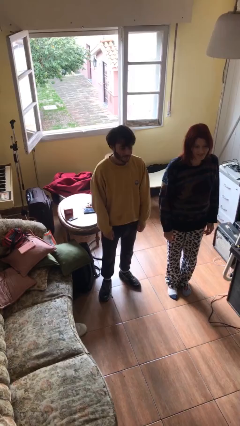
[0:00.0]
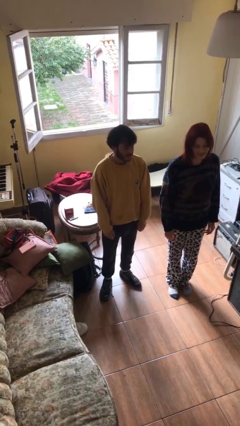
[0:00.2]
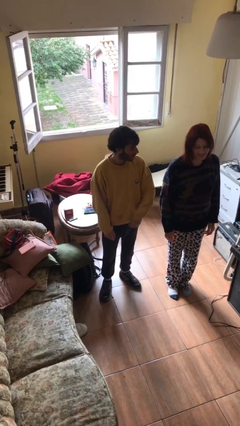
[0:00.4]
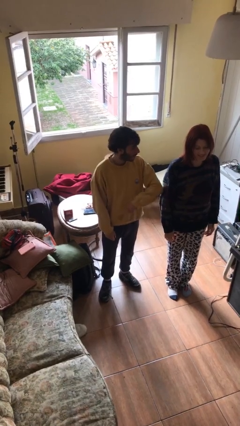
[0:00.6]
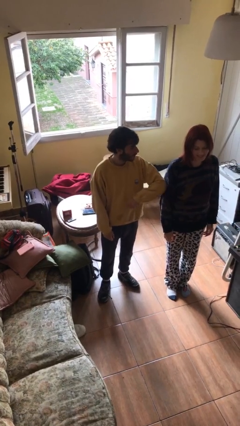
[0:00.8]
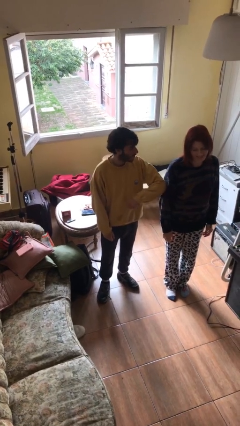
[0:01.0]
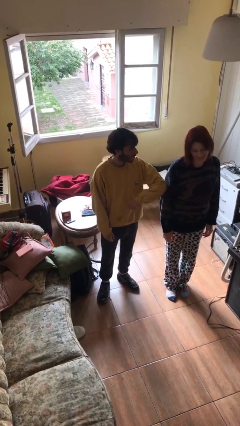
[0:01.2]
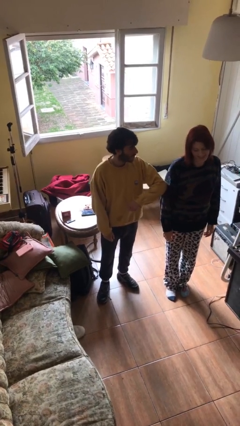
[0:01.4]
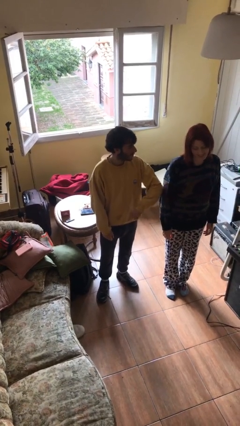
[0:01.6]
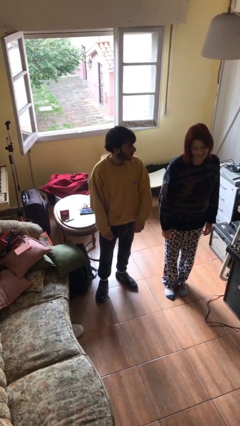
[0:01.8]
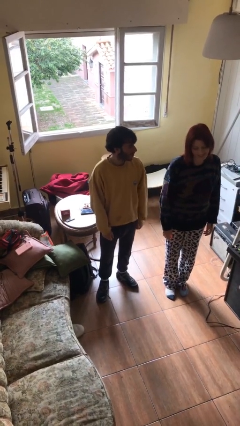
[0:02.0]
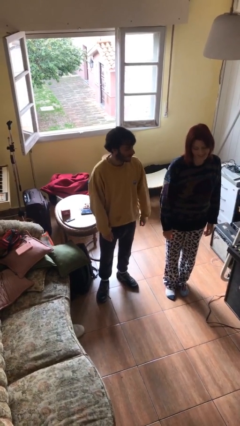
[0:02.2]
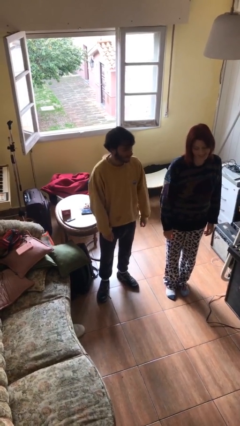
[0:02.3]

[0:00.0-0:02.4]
person nudges person with elbow

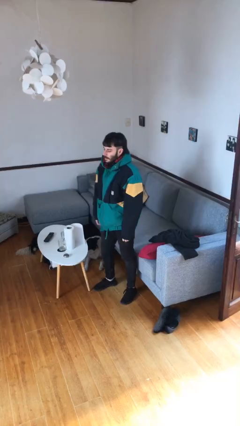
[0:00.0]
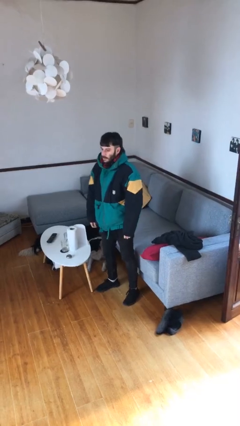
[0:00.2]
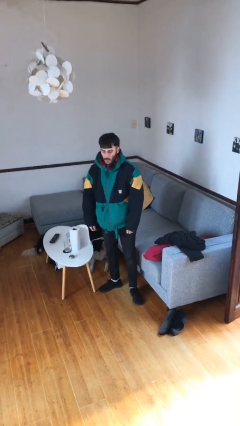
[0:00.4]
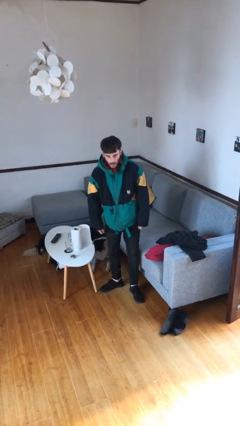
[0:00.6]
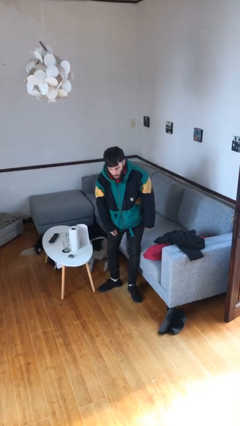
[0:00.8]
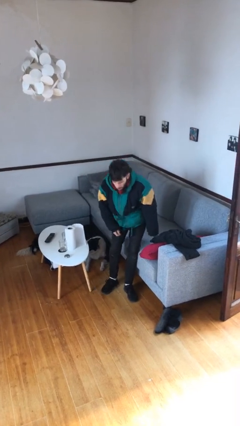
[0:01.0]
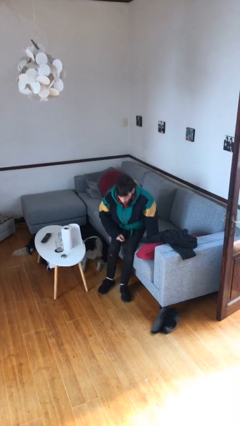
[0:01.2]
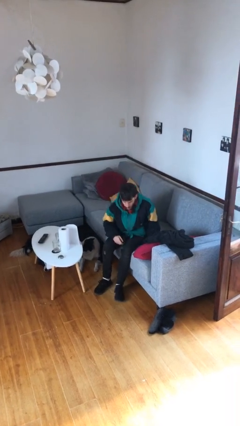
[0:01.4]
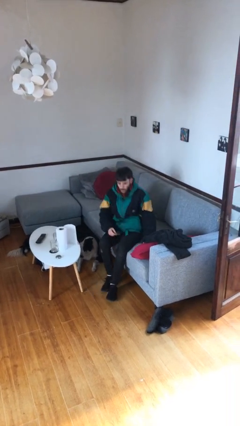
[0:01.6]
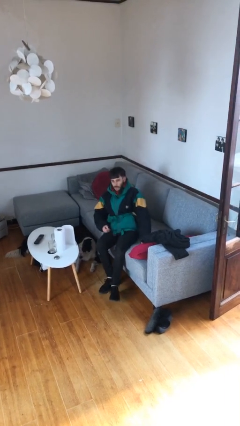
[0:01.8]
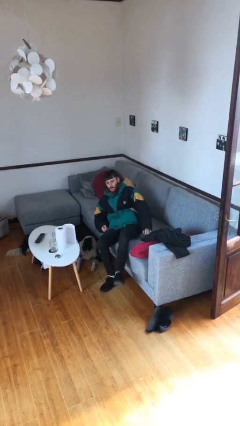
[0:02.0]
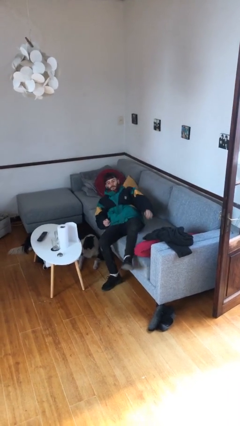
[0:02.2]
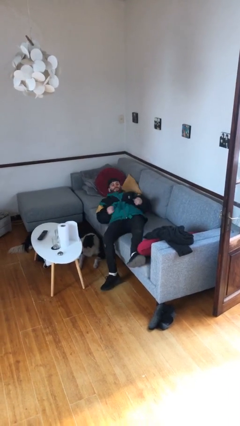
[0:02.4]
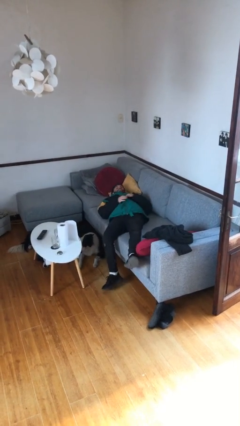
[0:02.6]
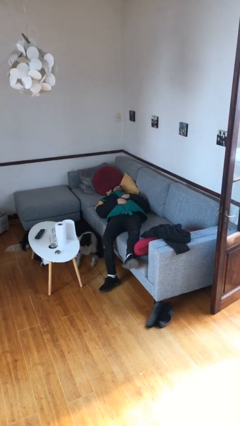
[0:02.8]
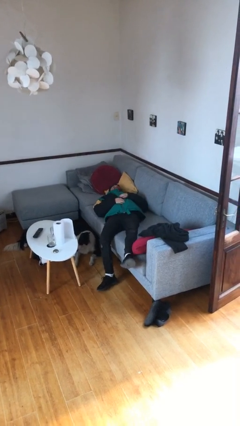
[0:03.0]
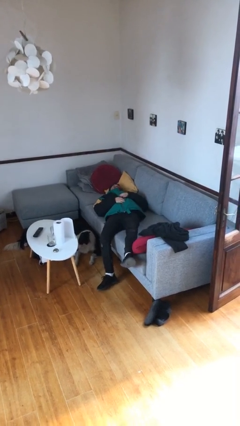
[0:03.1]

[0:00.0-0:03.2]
person lies down on couch

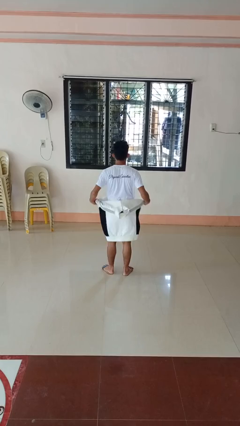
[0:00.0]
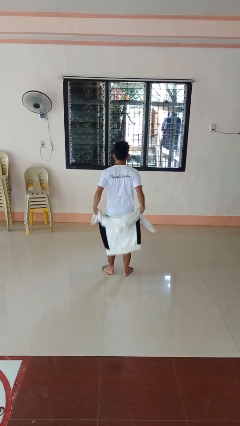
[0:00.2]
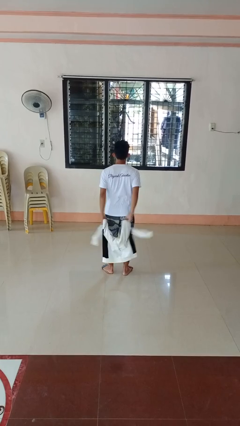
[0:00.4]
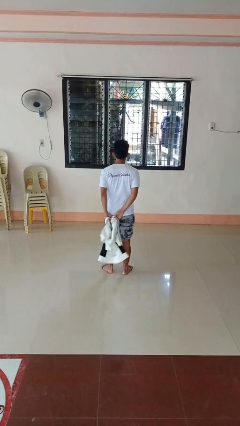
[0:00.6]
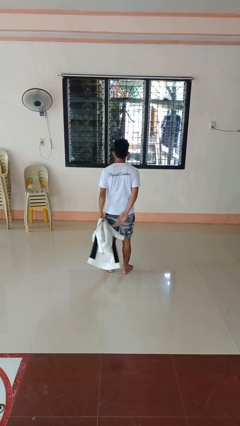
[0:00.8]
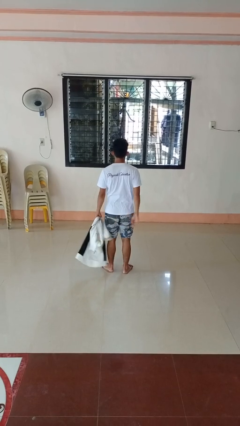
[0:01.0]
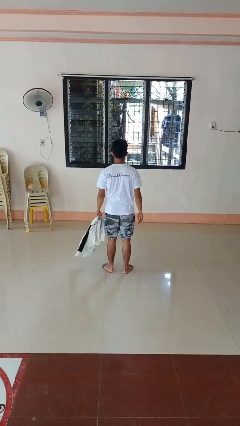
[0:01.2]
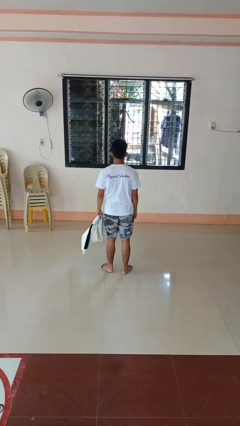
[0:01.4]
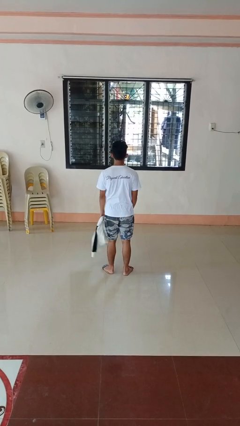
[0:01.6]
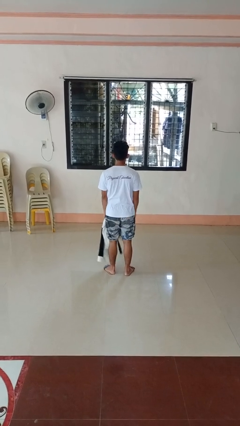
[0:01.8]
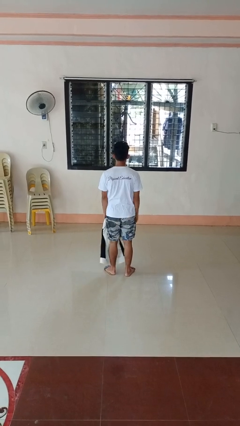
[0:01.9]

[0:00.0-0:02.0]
person unties jacket around waist

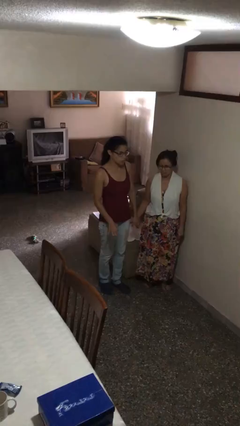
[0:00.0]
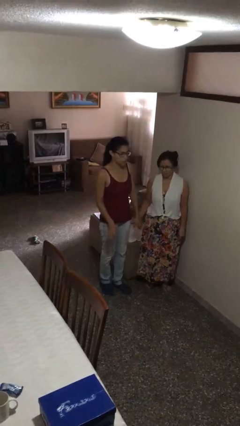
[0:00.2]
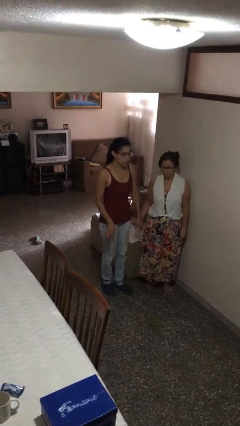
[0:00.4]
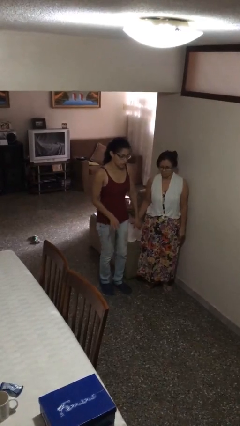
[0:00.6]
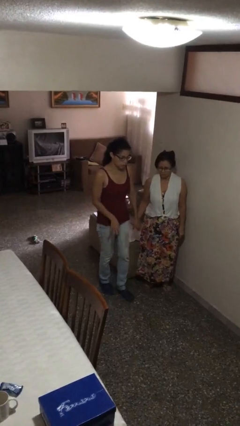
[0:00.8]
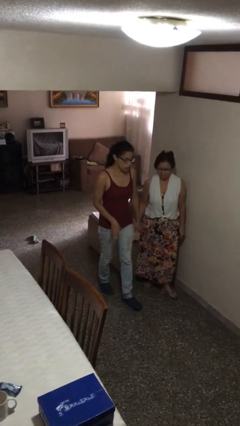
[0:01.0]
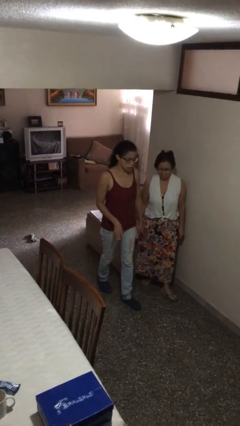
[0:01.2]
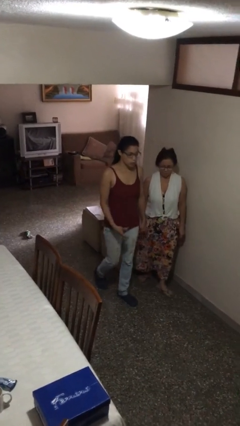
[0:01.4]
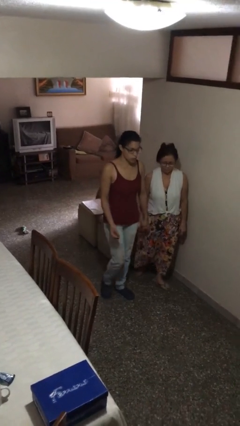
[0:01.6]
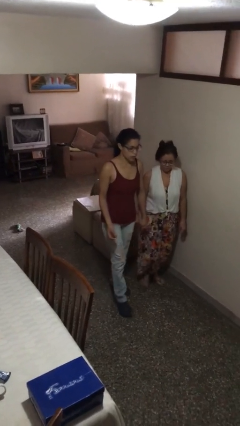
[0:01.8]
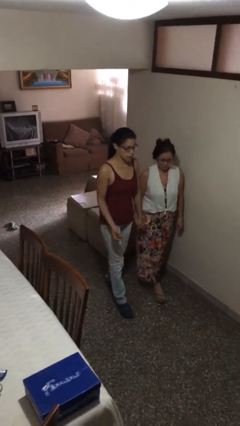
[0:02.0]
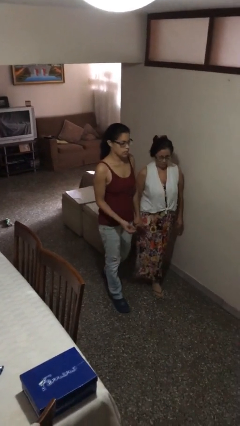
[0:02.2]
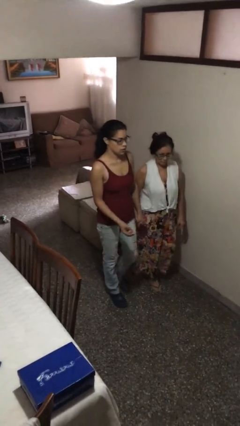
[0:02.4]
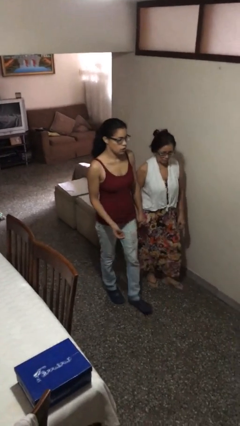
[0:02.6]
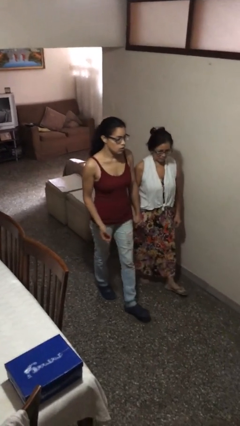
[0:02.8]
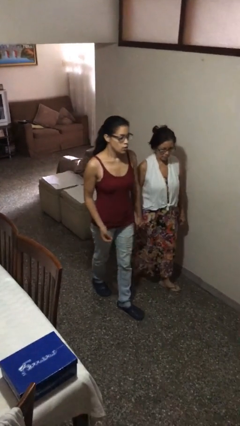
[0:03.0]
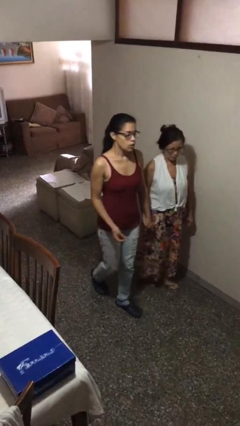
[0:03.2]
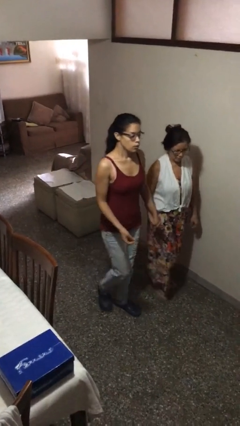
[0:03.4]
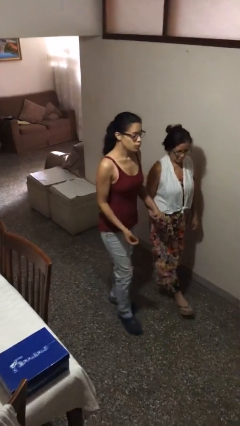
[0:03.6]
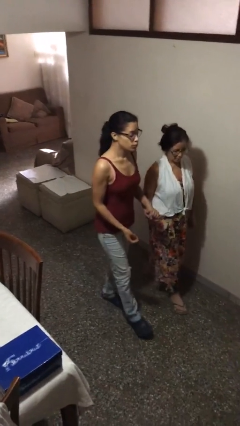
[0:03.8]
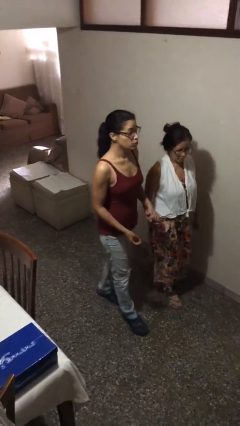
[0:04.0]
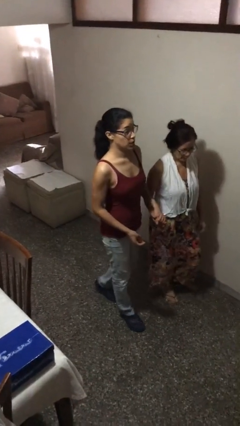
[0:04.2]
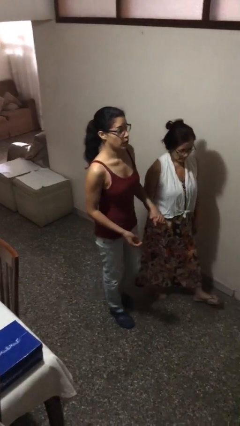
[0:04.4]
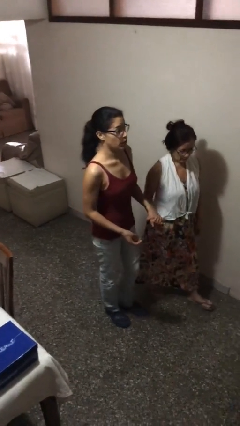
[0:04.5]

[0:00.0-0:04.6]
person holds hand

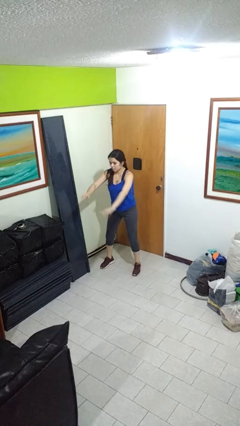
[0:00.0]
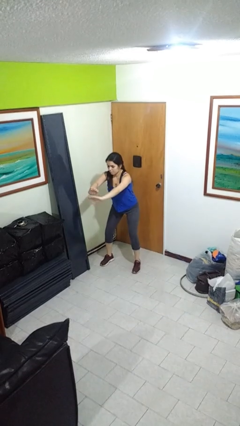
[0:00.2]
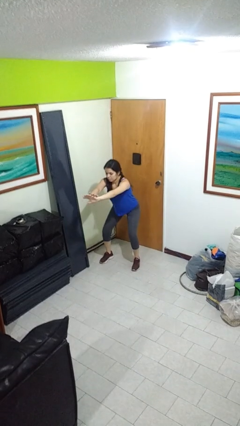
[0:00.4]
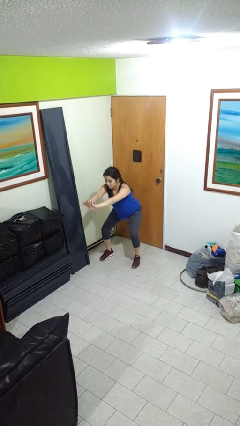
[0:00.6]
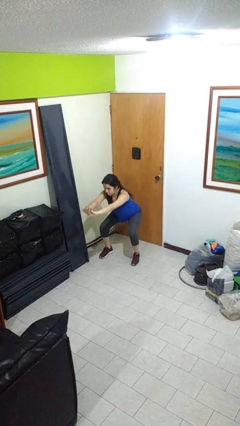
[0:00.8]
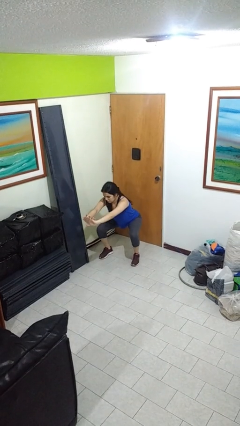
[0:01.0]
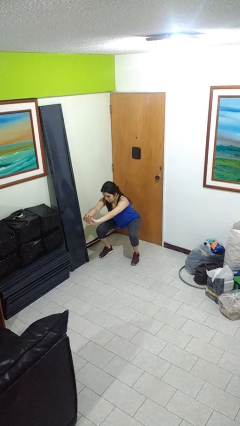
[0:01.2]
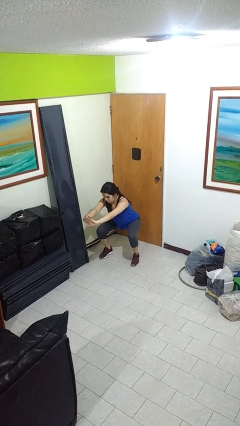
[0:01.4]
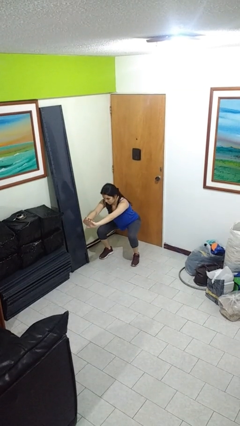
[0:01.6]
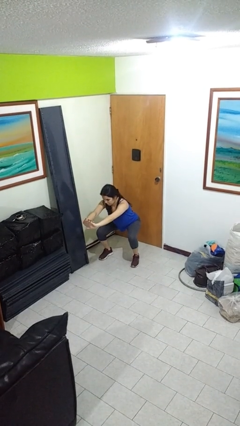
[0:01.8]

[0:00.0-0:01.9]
person squats

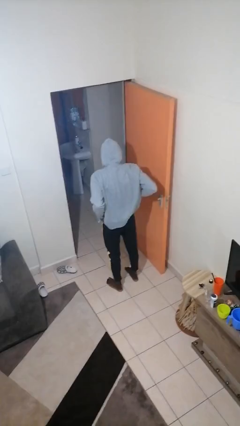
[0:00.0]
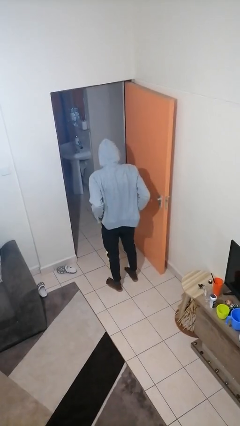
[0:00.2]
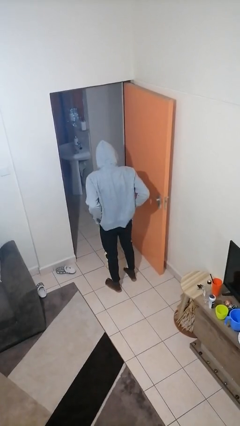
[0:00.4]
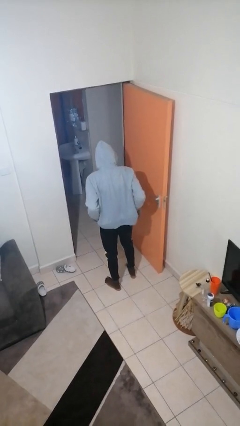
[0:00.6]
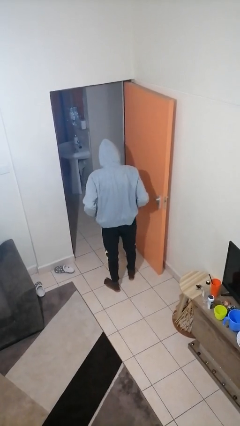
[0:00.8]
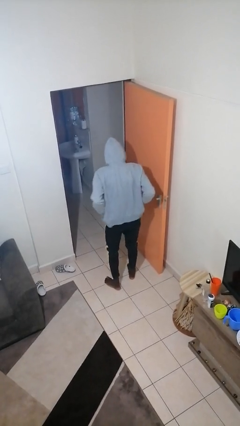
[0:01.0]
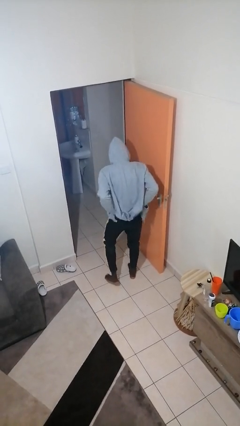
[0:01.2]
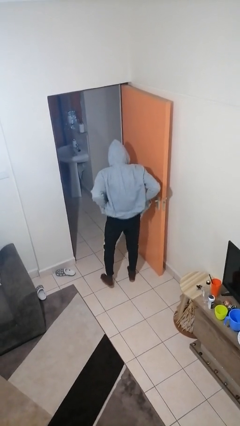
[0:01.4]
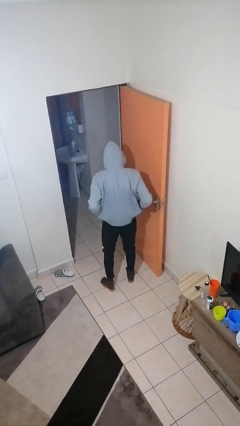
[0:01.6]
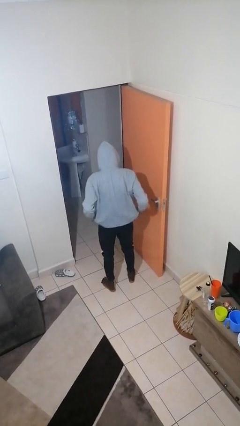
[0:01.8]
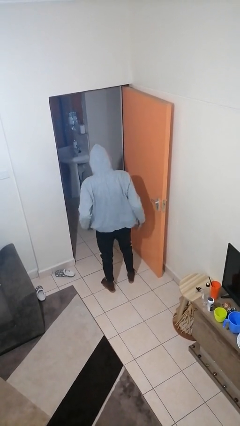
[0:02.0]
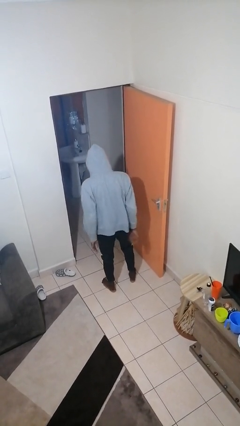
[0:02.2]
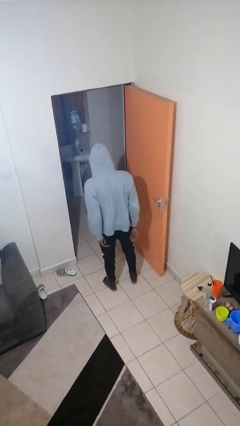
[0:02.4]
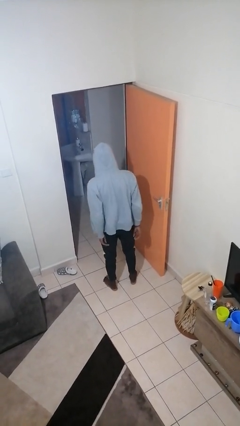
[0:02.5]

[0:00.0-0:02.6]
person hikes up pants

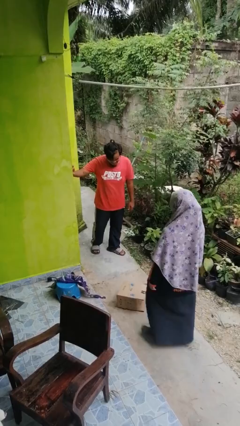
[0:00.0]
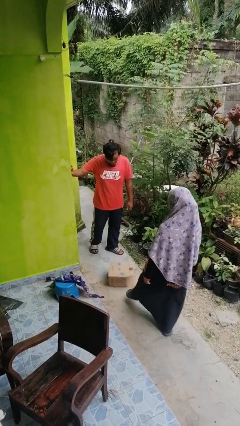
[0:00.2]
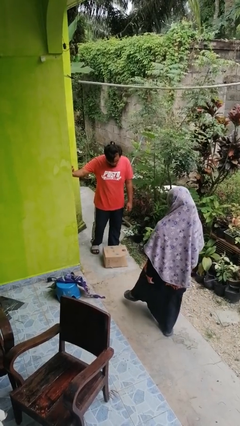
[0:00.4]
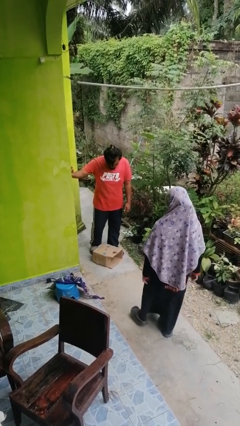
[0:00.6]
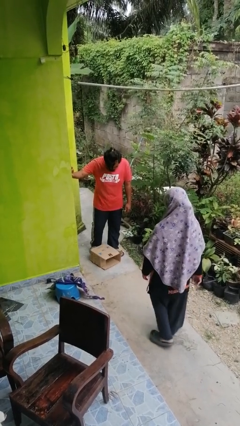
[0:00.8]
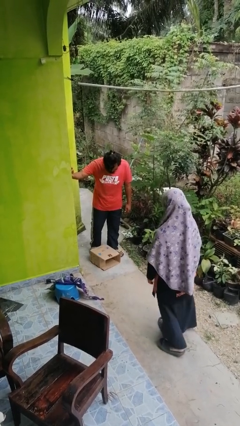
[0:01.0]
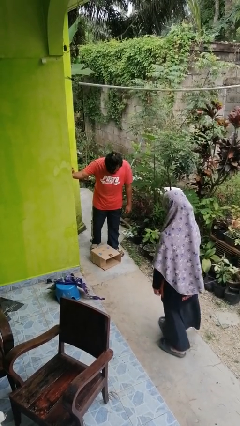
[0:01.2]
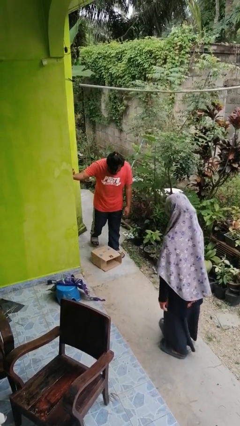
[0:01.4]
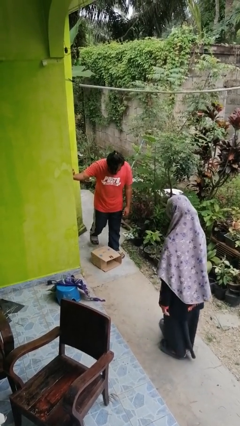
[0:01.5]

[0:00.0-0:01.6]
person kicks object to person
